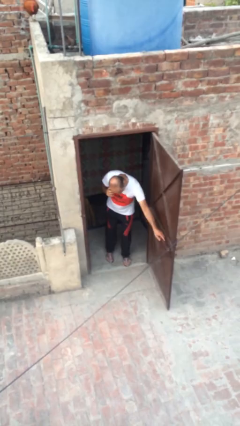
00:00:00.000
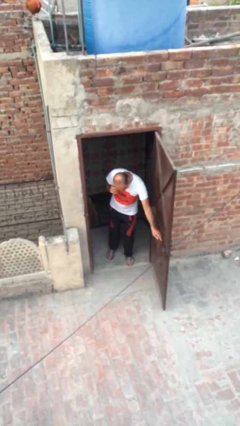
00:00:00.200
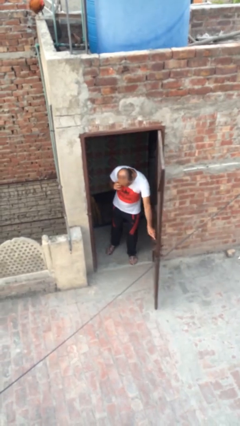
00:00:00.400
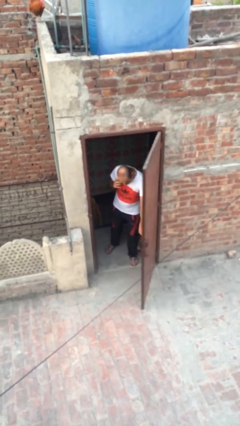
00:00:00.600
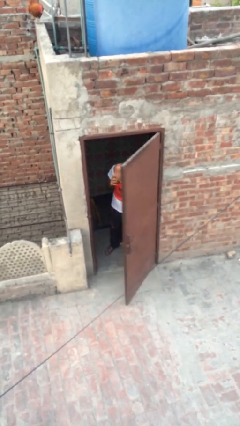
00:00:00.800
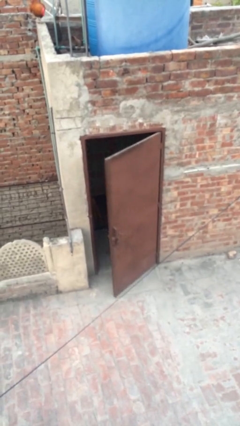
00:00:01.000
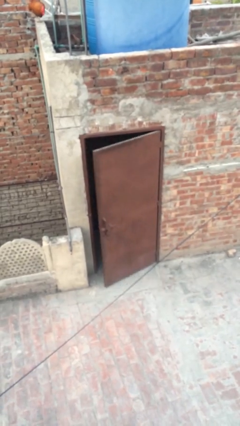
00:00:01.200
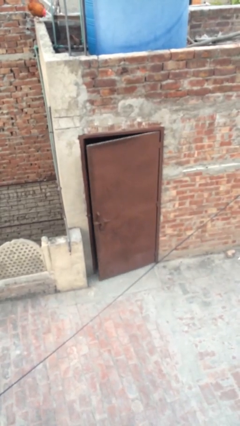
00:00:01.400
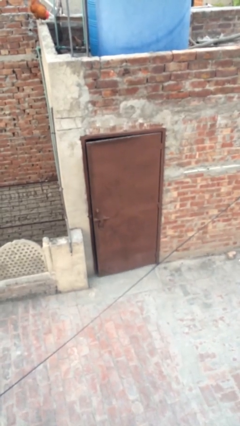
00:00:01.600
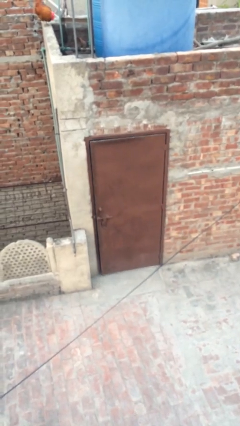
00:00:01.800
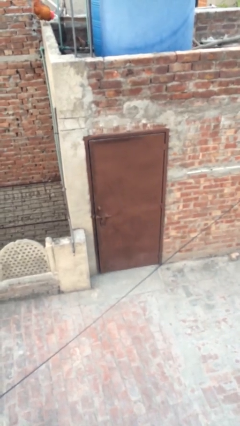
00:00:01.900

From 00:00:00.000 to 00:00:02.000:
person closes facility door

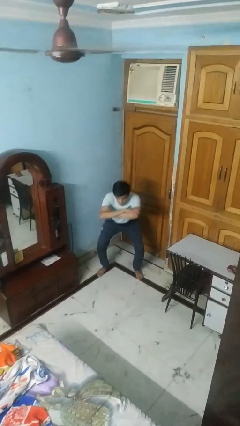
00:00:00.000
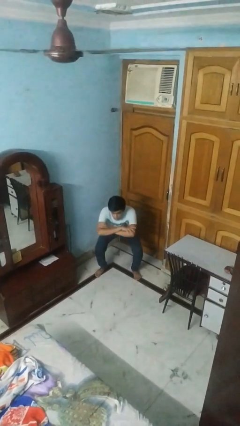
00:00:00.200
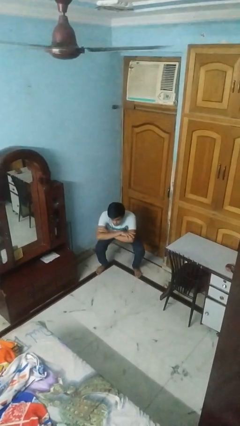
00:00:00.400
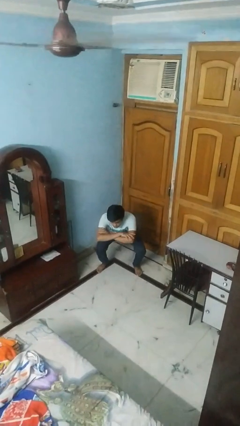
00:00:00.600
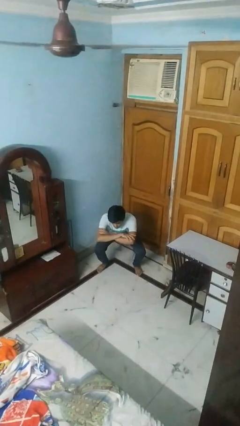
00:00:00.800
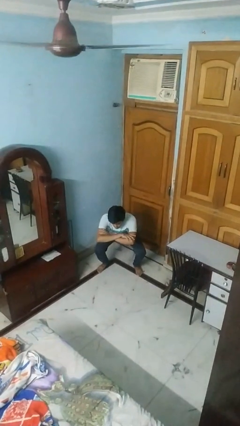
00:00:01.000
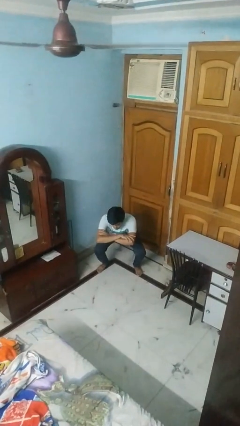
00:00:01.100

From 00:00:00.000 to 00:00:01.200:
person squats

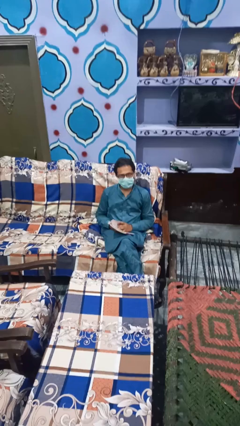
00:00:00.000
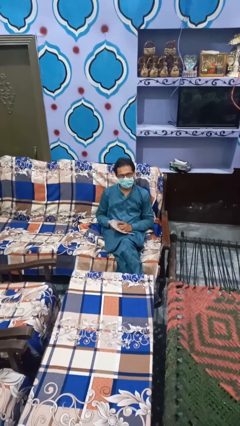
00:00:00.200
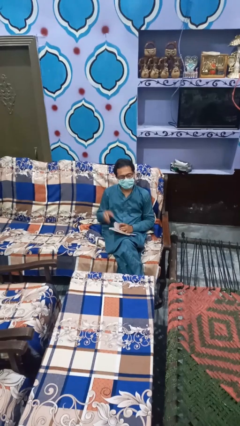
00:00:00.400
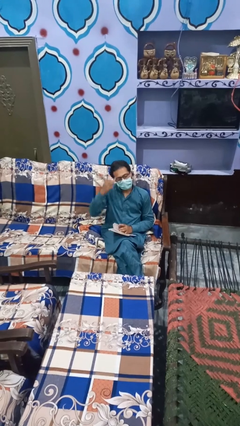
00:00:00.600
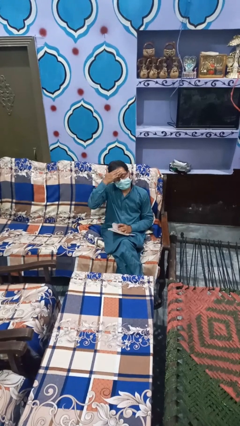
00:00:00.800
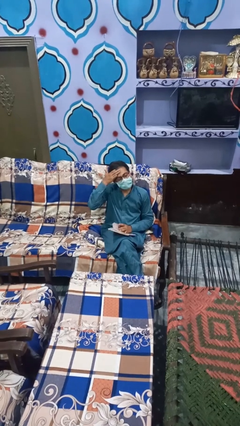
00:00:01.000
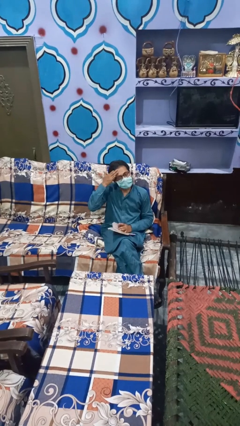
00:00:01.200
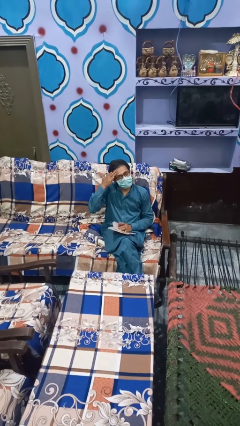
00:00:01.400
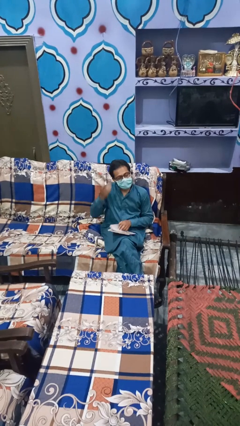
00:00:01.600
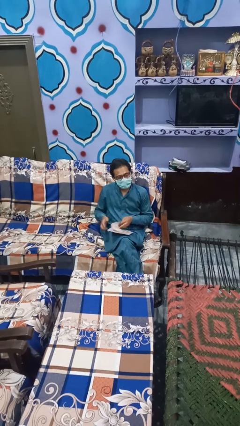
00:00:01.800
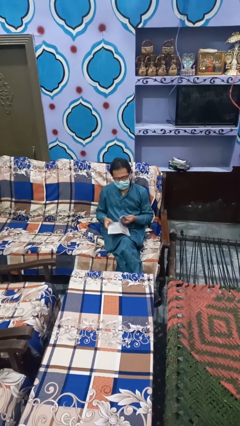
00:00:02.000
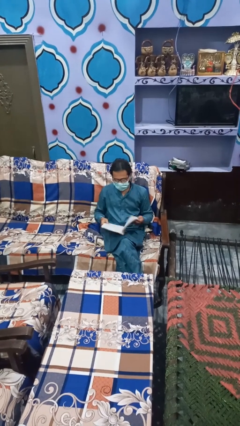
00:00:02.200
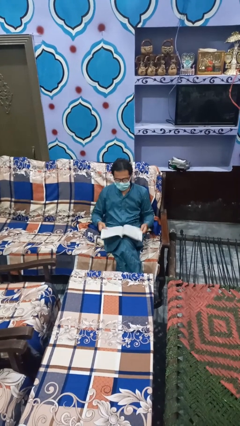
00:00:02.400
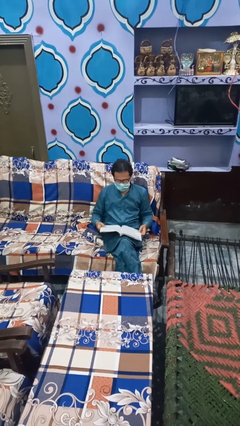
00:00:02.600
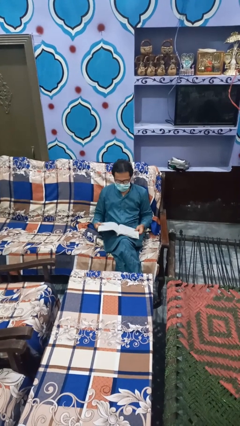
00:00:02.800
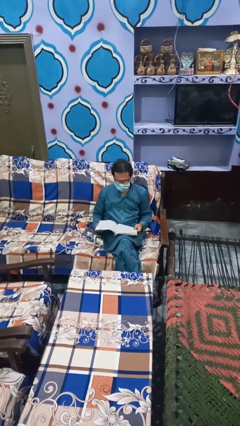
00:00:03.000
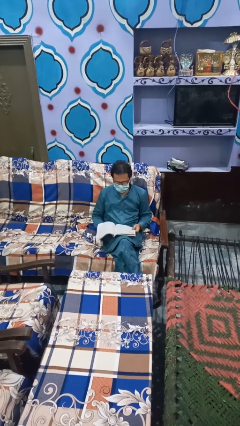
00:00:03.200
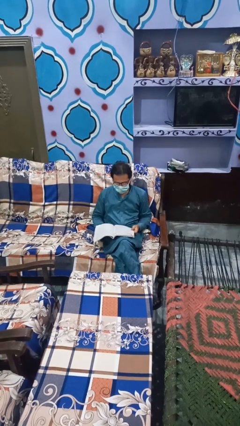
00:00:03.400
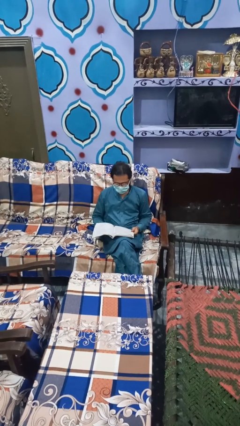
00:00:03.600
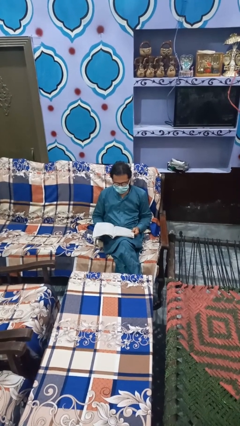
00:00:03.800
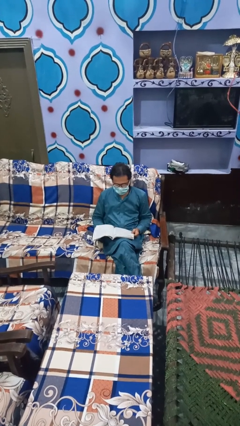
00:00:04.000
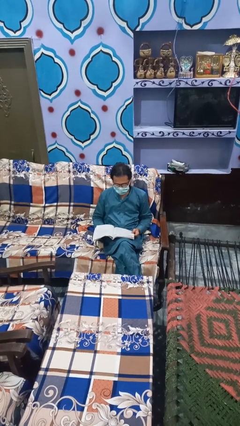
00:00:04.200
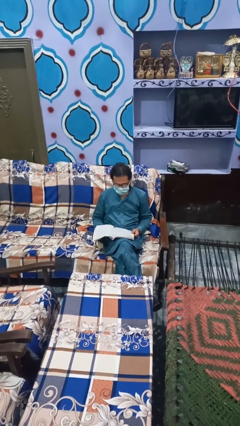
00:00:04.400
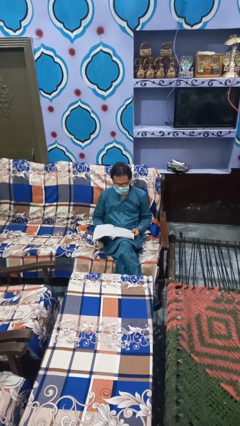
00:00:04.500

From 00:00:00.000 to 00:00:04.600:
person reads book

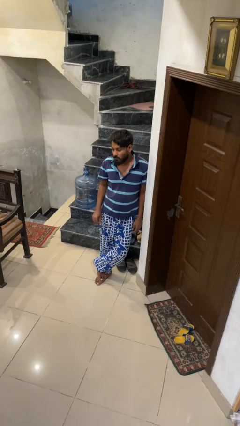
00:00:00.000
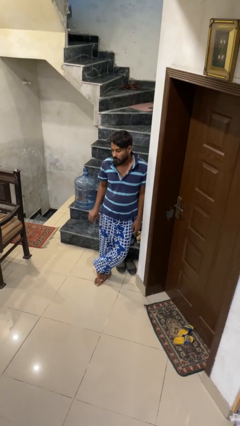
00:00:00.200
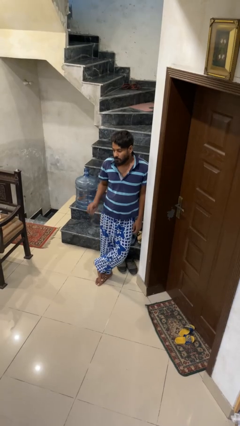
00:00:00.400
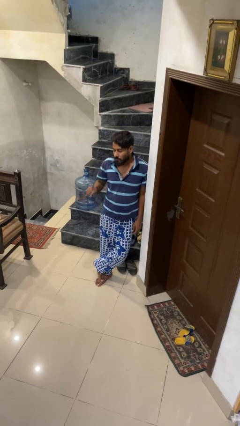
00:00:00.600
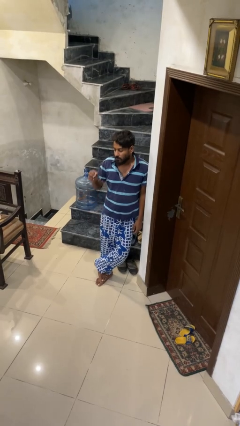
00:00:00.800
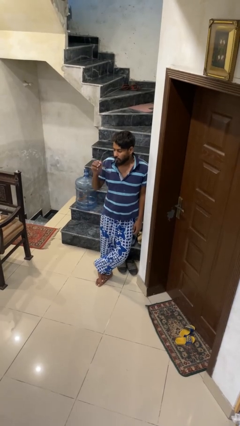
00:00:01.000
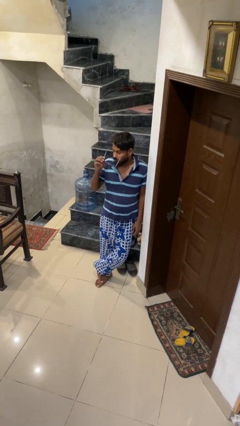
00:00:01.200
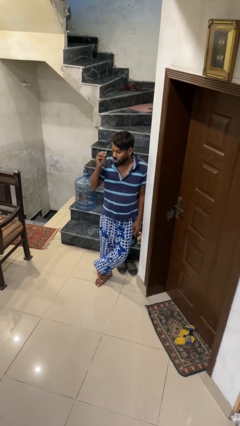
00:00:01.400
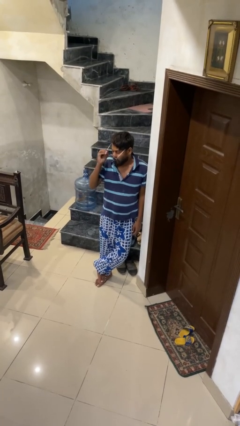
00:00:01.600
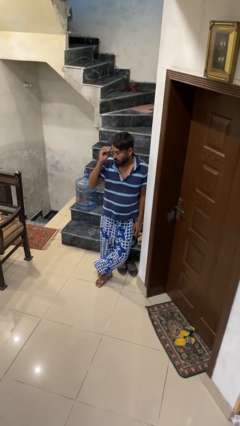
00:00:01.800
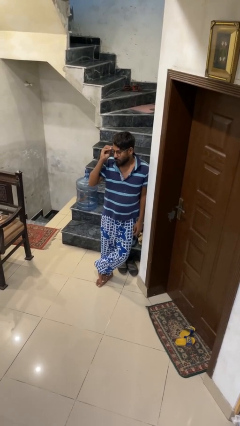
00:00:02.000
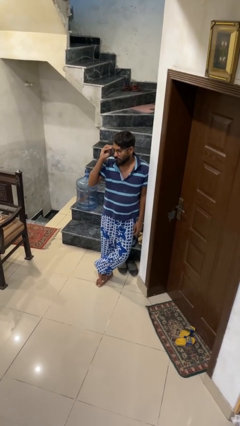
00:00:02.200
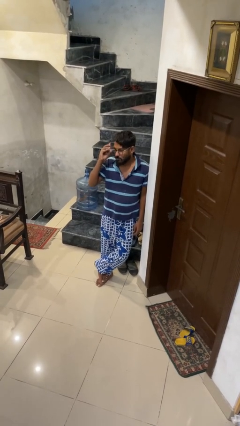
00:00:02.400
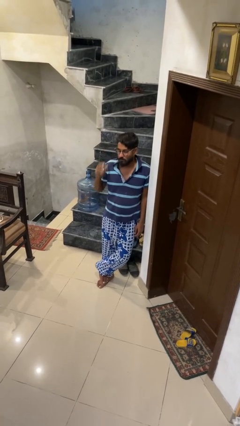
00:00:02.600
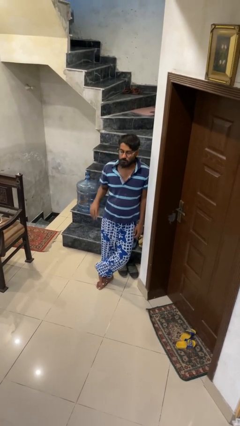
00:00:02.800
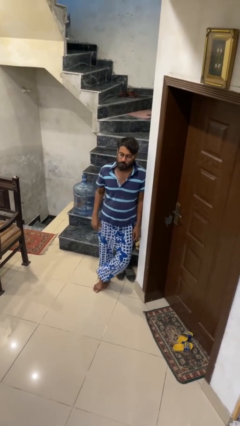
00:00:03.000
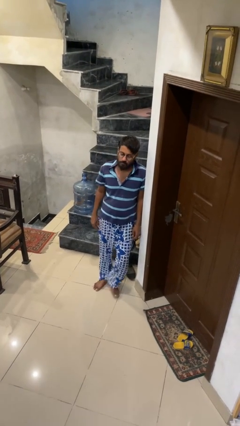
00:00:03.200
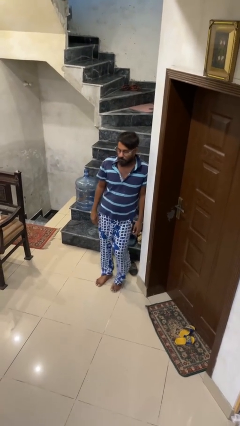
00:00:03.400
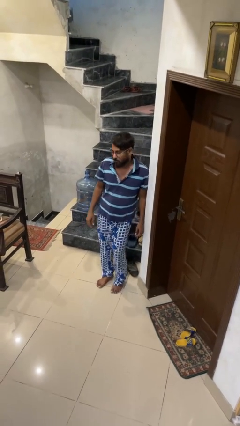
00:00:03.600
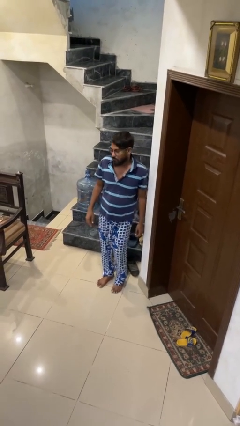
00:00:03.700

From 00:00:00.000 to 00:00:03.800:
person puts on glasses

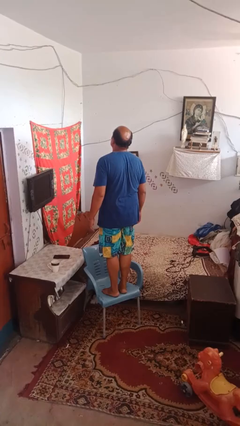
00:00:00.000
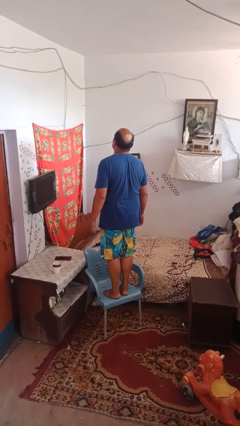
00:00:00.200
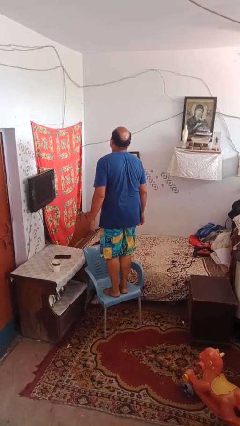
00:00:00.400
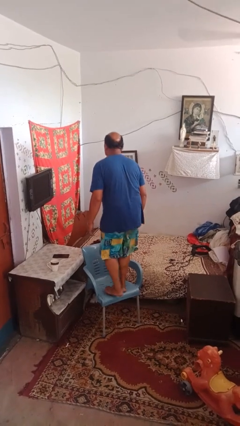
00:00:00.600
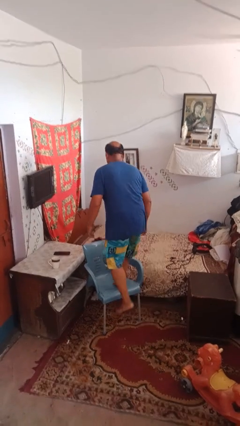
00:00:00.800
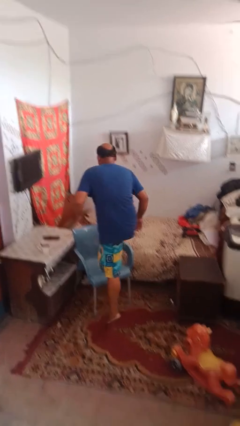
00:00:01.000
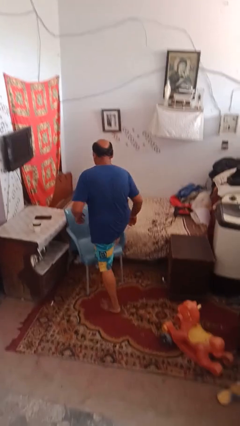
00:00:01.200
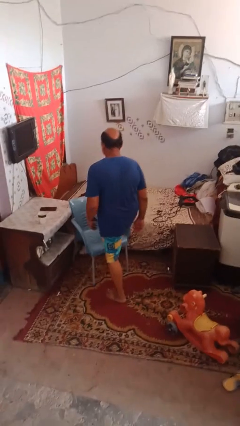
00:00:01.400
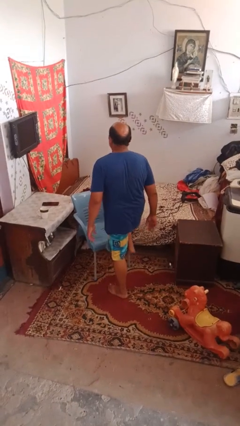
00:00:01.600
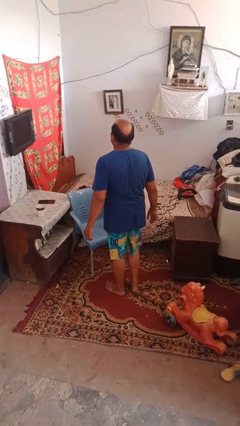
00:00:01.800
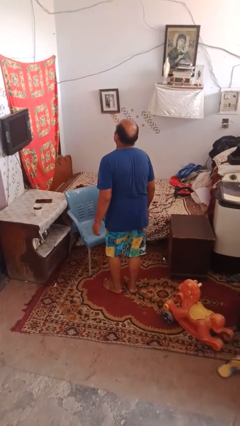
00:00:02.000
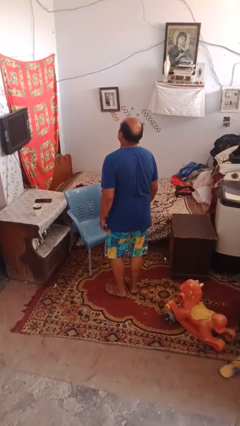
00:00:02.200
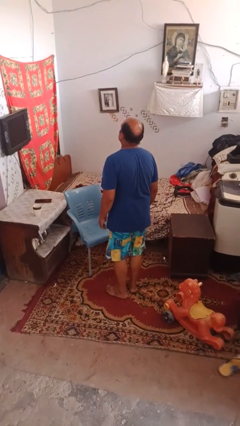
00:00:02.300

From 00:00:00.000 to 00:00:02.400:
person climbs off chair

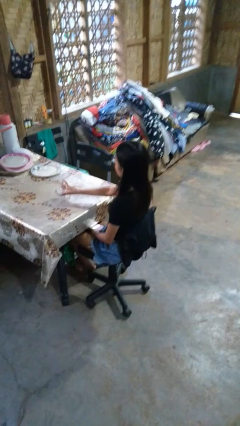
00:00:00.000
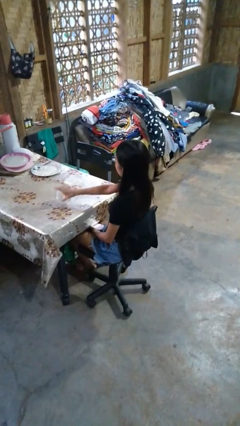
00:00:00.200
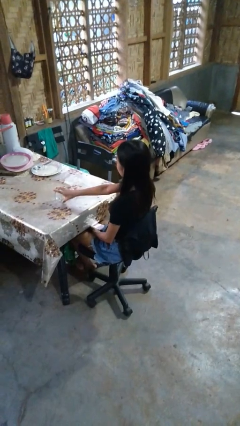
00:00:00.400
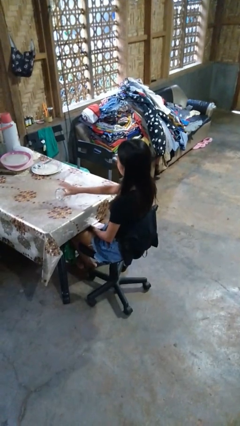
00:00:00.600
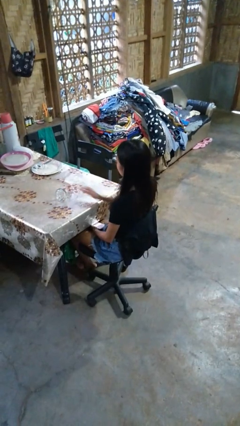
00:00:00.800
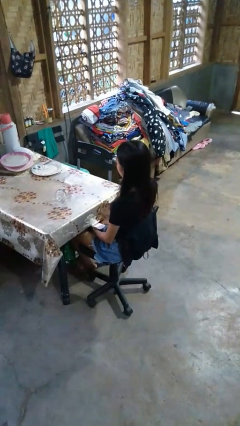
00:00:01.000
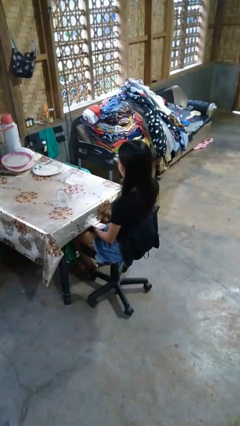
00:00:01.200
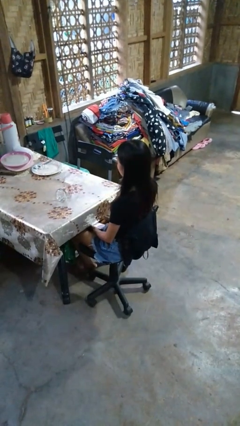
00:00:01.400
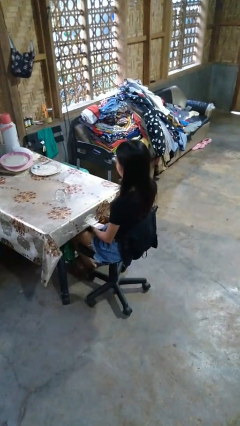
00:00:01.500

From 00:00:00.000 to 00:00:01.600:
person knocks over glass

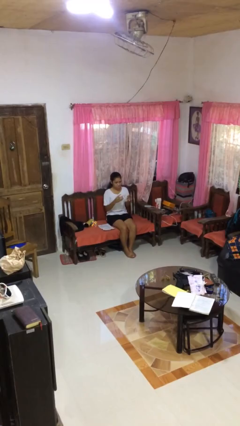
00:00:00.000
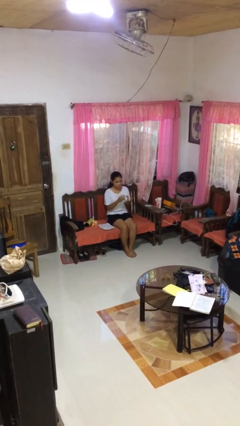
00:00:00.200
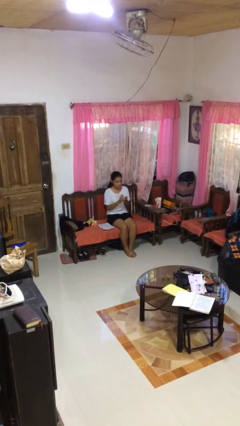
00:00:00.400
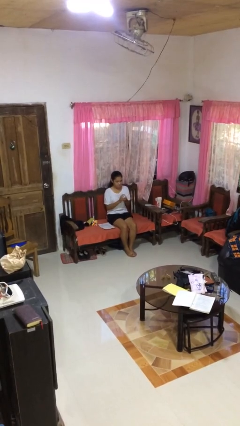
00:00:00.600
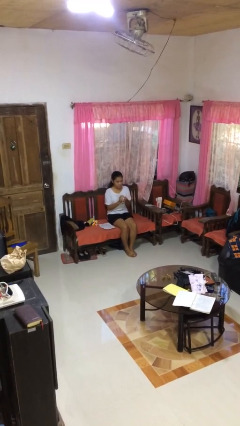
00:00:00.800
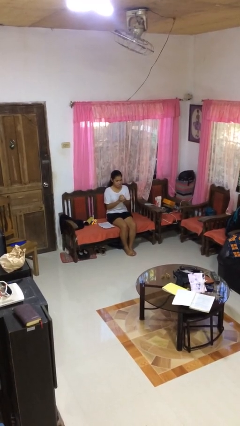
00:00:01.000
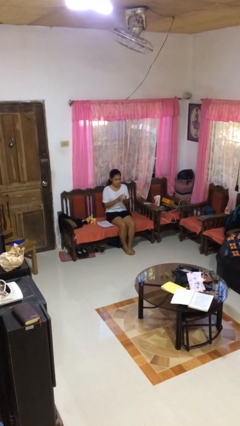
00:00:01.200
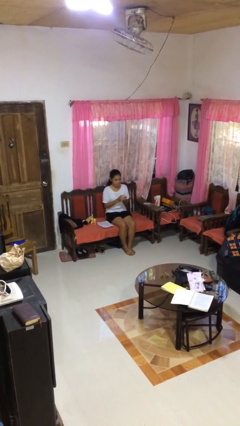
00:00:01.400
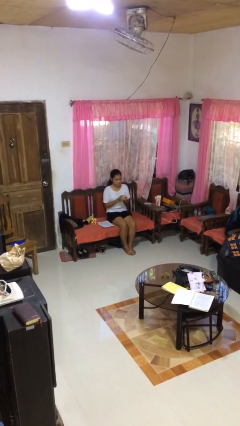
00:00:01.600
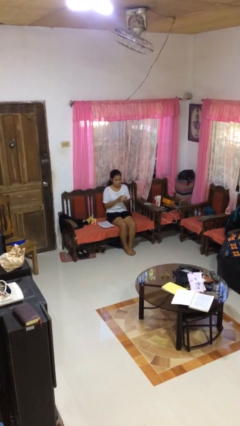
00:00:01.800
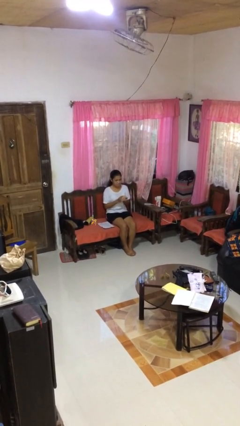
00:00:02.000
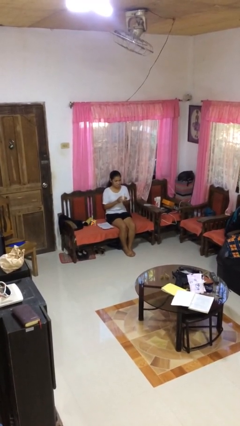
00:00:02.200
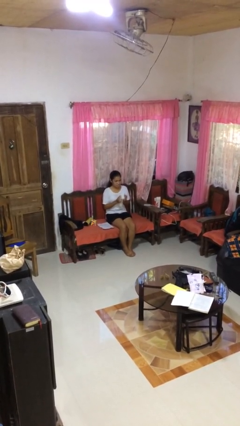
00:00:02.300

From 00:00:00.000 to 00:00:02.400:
person crumples paper
